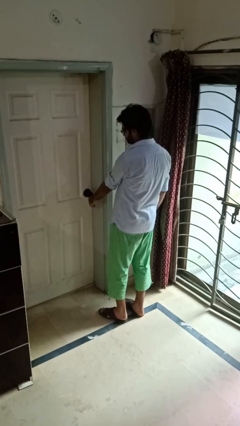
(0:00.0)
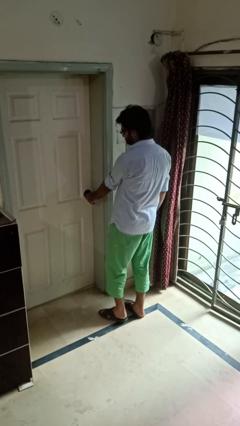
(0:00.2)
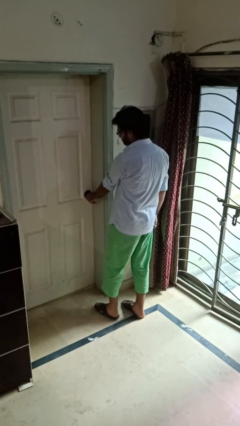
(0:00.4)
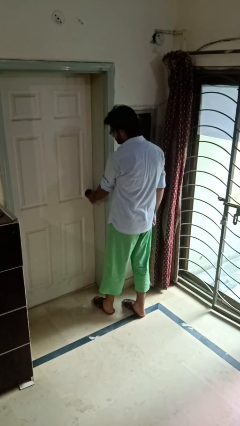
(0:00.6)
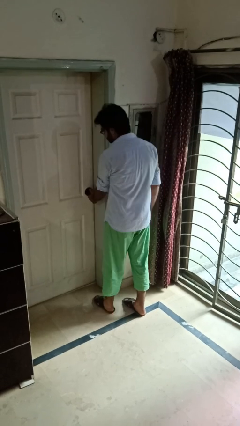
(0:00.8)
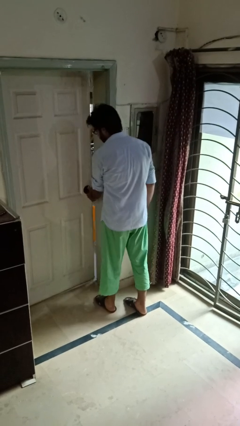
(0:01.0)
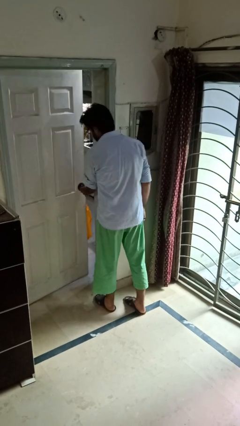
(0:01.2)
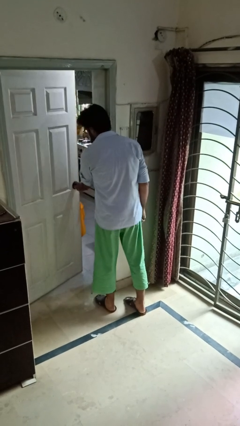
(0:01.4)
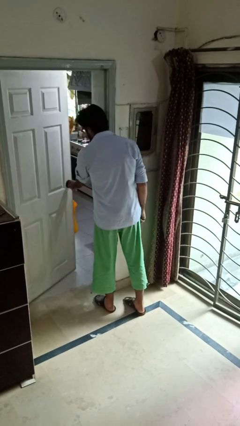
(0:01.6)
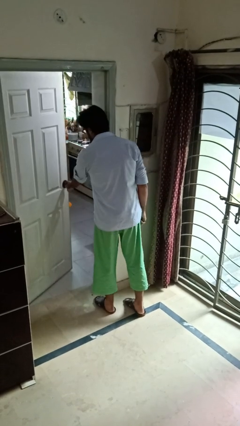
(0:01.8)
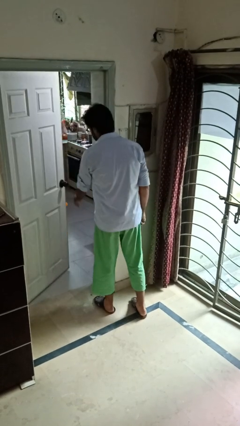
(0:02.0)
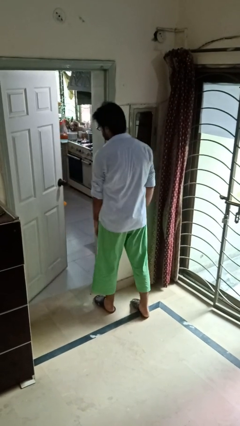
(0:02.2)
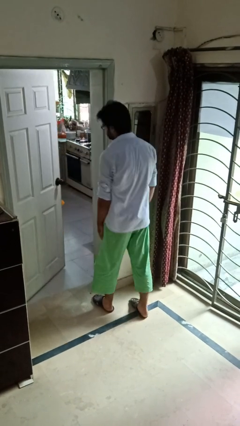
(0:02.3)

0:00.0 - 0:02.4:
person opens facility door

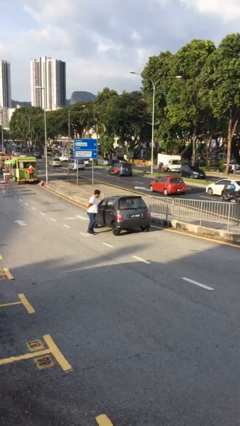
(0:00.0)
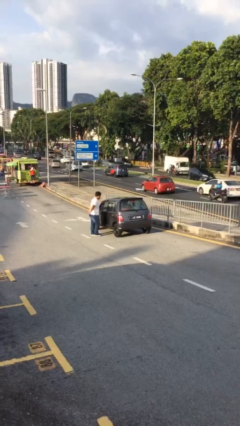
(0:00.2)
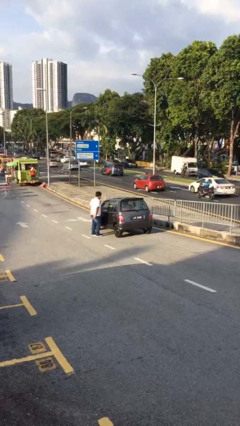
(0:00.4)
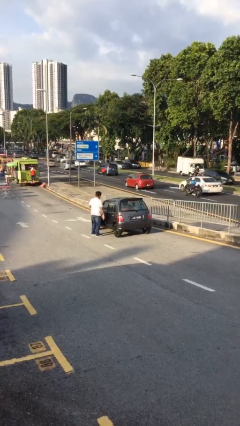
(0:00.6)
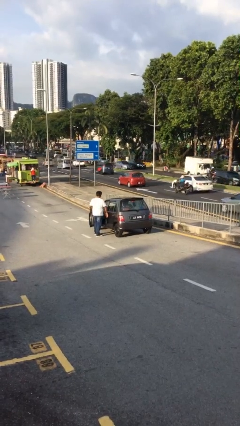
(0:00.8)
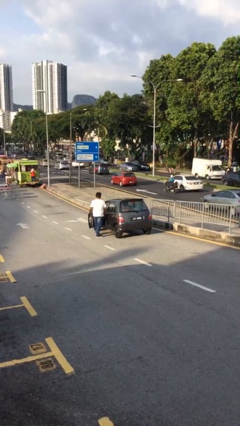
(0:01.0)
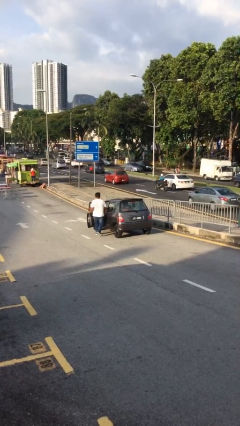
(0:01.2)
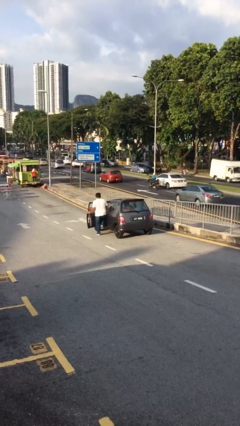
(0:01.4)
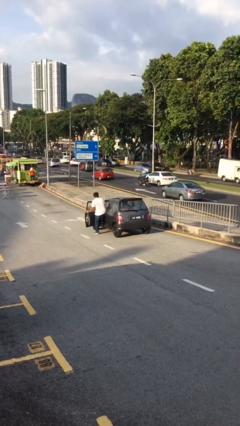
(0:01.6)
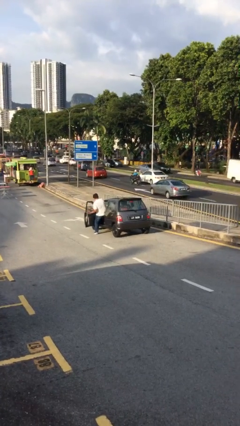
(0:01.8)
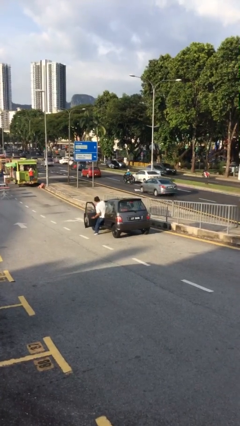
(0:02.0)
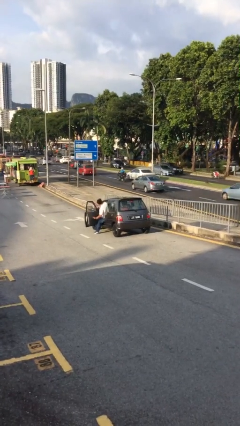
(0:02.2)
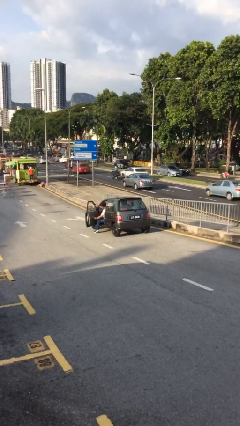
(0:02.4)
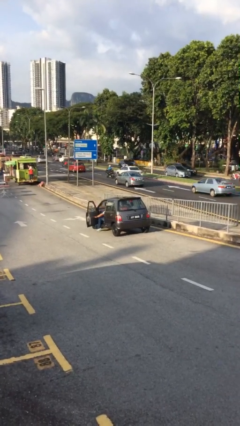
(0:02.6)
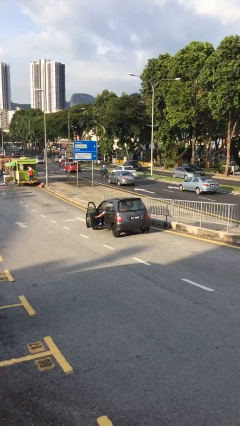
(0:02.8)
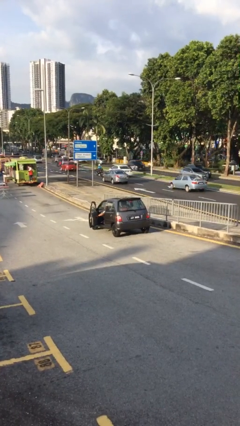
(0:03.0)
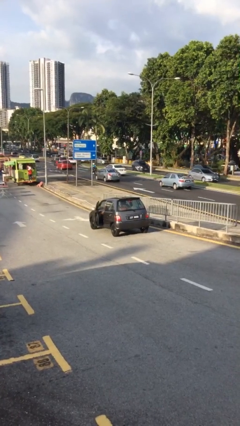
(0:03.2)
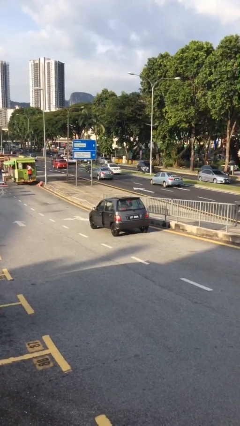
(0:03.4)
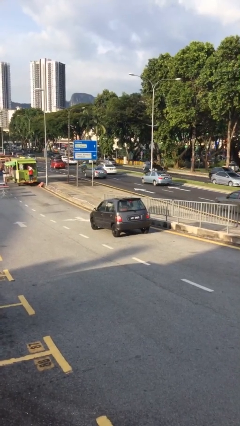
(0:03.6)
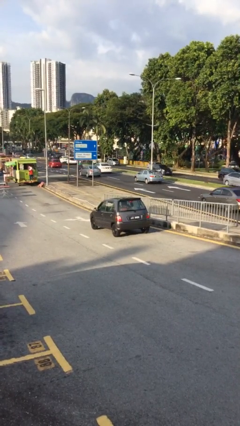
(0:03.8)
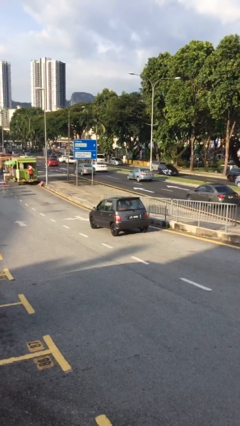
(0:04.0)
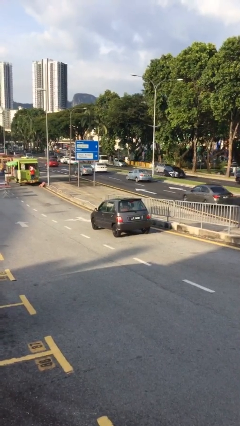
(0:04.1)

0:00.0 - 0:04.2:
car picks up person

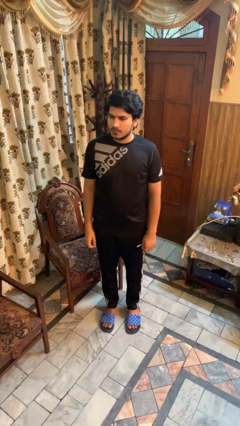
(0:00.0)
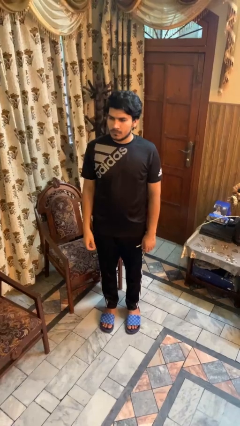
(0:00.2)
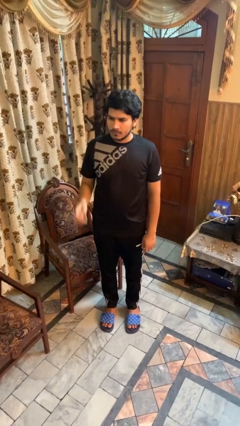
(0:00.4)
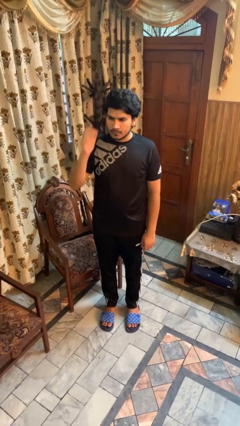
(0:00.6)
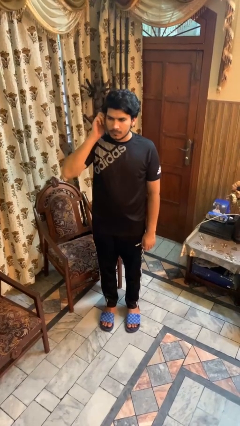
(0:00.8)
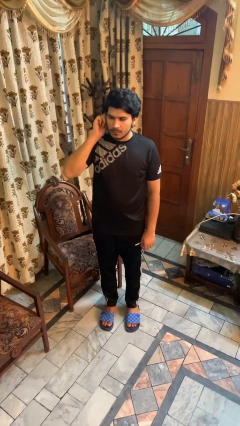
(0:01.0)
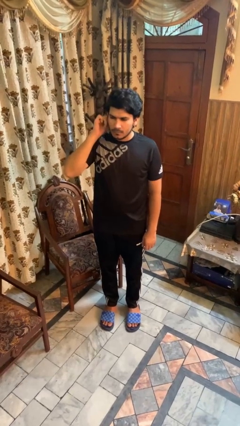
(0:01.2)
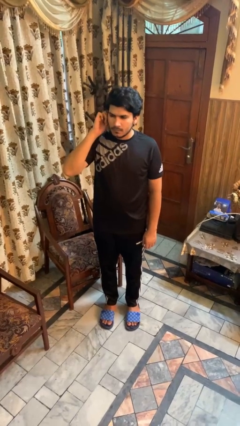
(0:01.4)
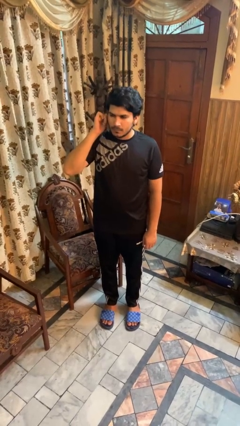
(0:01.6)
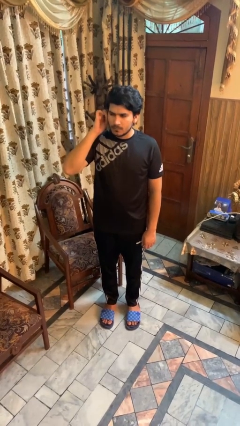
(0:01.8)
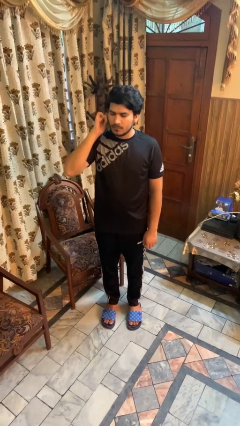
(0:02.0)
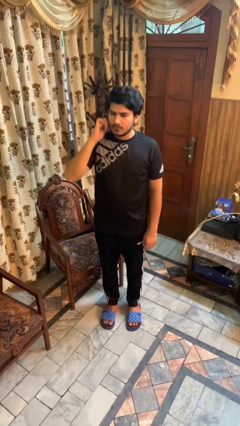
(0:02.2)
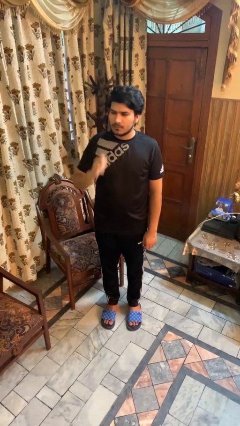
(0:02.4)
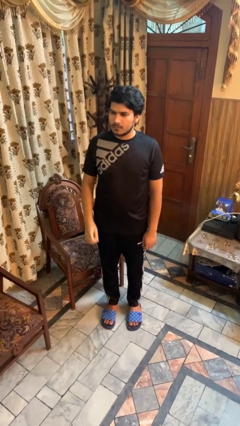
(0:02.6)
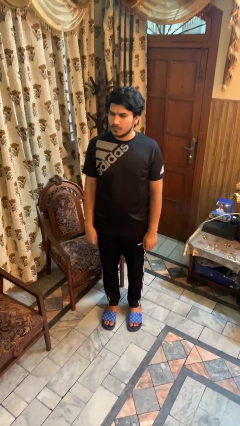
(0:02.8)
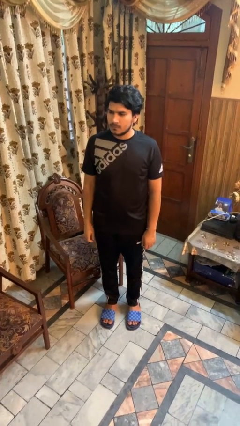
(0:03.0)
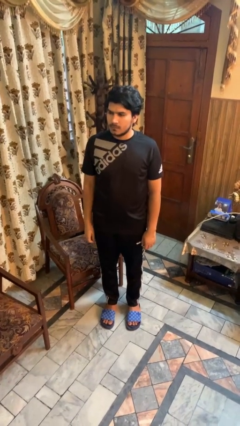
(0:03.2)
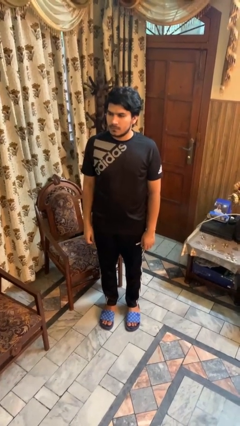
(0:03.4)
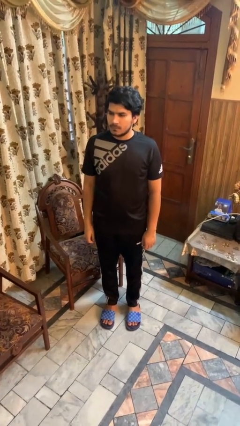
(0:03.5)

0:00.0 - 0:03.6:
person touches earlobe

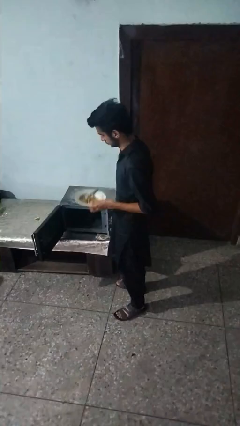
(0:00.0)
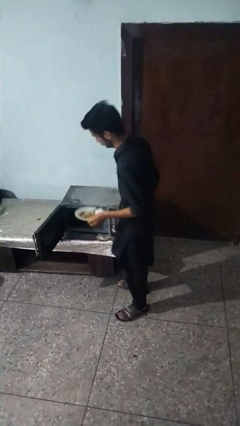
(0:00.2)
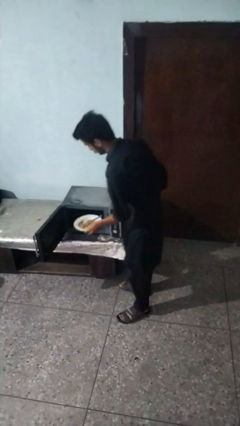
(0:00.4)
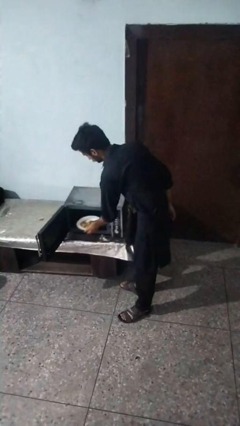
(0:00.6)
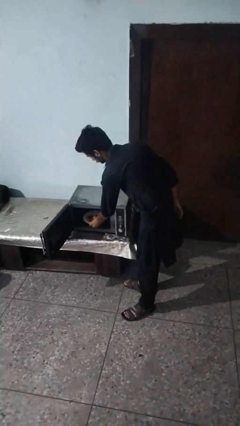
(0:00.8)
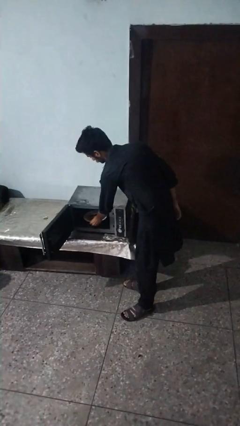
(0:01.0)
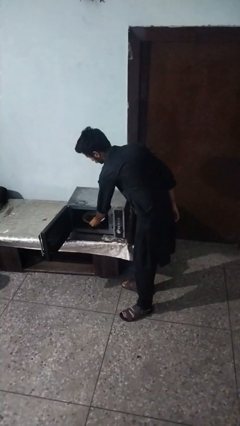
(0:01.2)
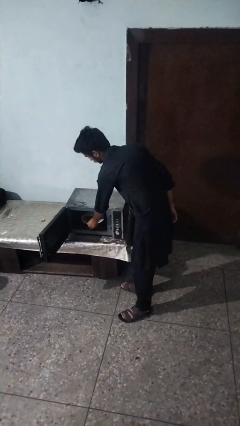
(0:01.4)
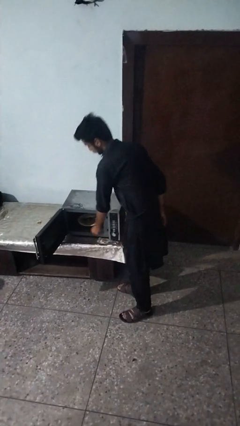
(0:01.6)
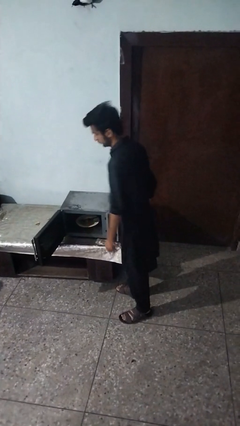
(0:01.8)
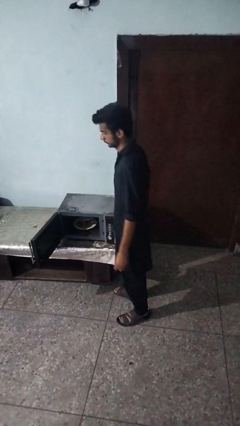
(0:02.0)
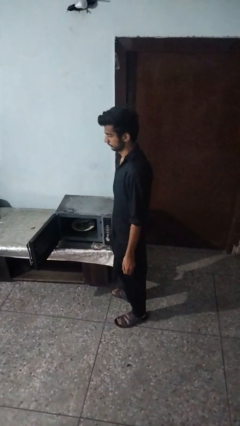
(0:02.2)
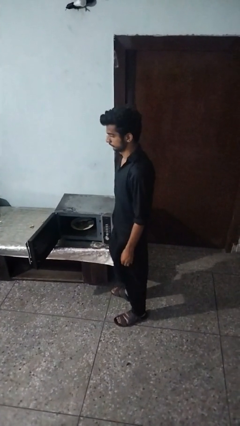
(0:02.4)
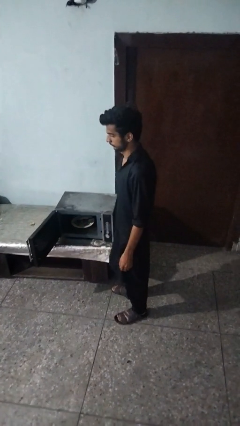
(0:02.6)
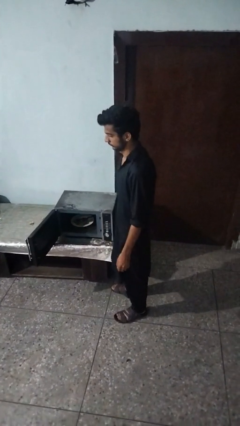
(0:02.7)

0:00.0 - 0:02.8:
person puts object into oven

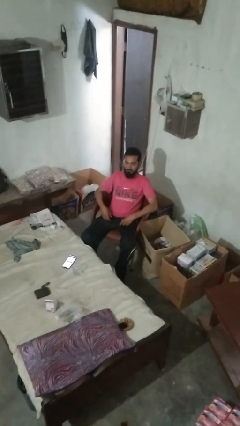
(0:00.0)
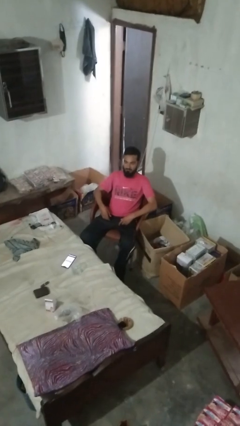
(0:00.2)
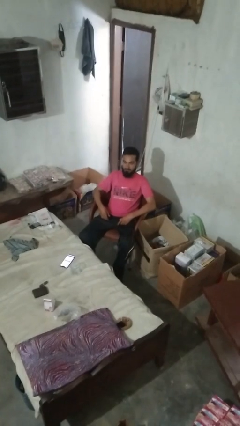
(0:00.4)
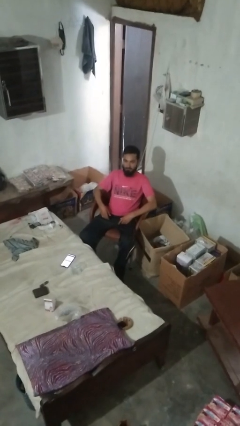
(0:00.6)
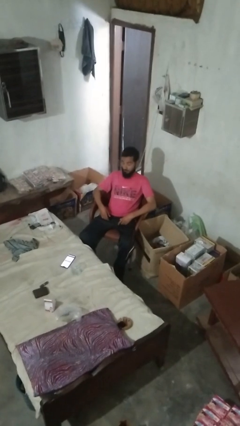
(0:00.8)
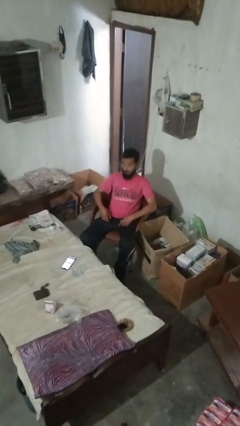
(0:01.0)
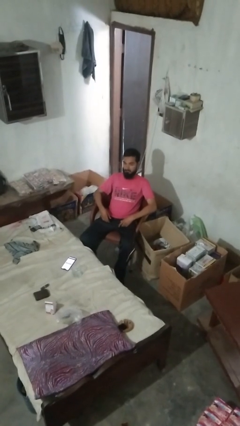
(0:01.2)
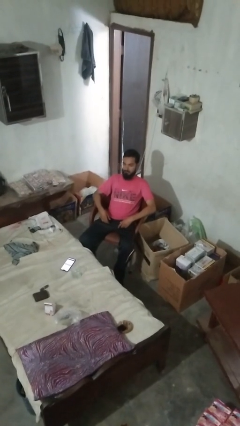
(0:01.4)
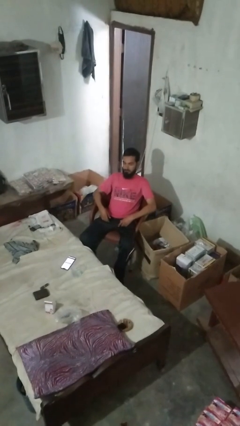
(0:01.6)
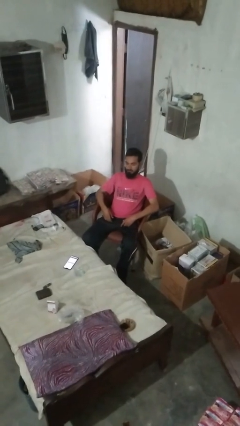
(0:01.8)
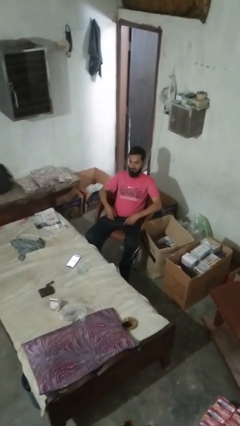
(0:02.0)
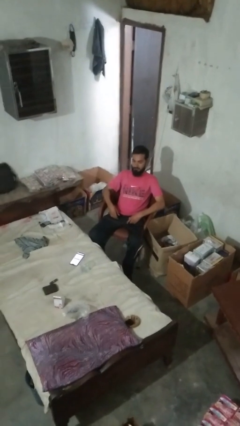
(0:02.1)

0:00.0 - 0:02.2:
person shakes head

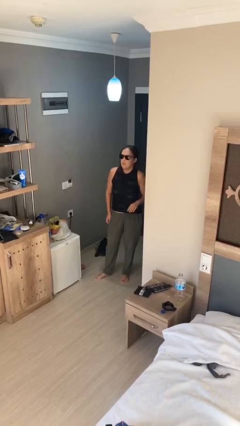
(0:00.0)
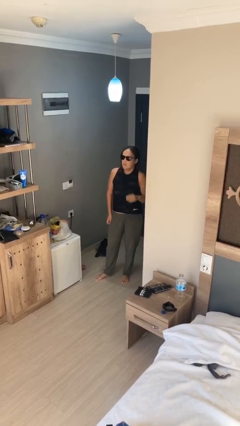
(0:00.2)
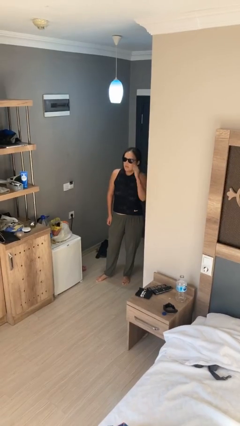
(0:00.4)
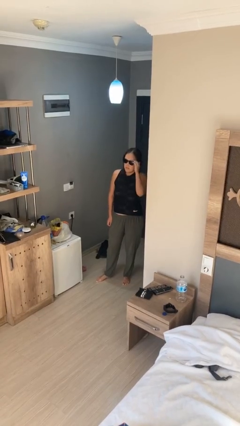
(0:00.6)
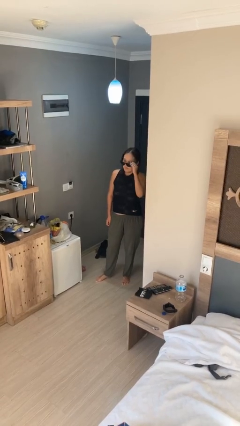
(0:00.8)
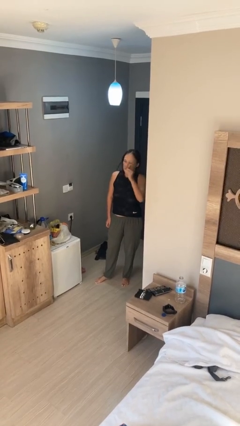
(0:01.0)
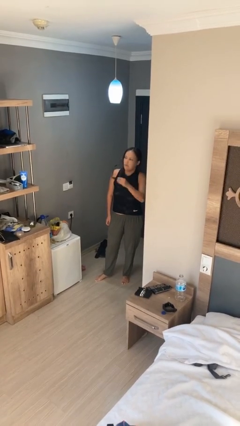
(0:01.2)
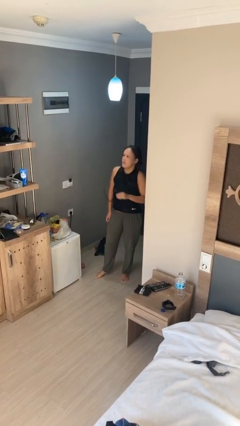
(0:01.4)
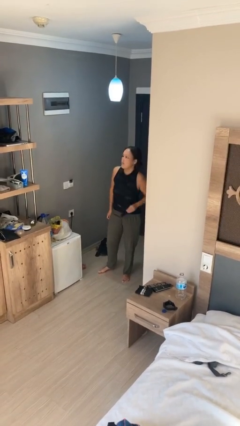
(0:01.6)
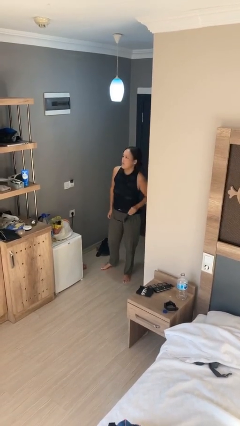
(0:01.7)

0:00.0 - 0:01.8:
person takes off sunglasses

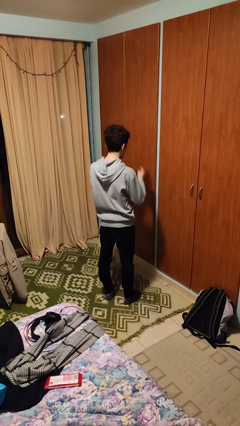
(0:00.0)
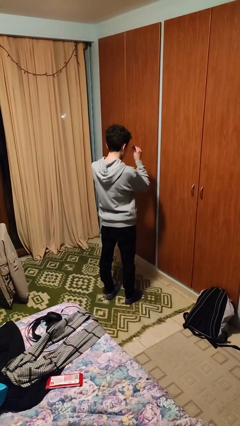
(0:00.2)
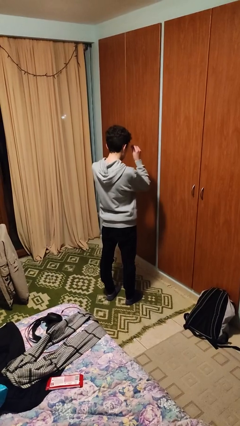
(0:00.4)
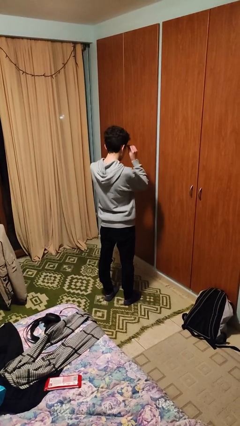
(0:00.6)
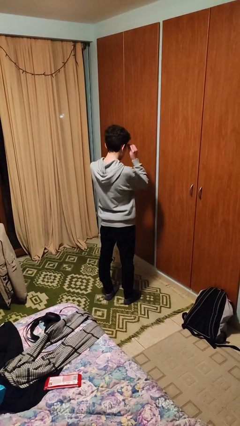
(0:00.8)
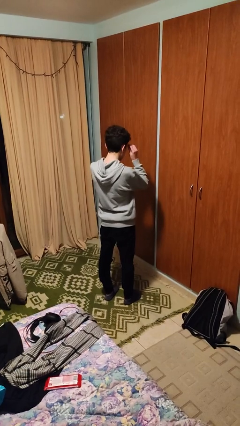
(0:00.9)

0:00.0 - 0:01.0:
person puts on glasses
